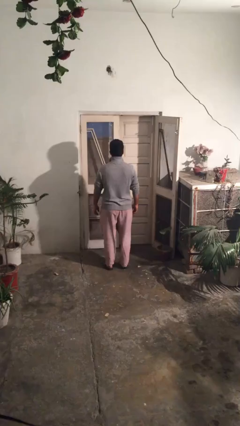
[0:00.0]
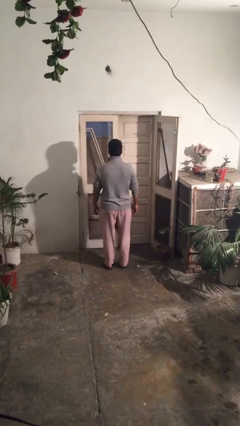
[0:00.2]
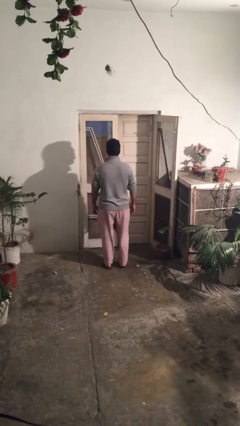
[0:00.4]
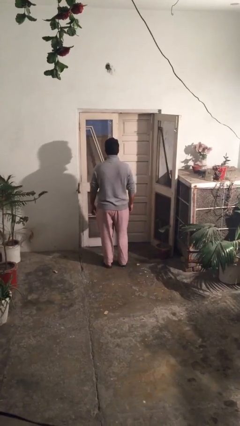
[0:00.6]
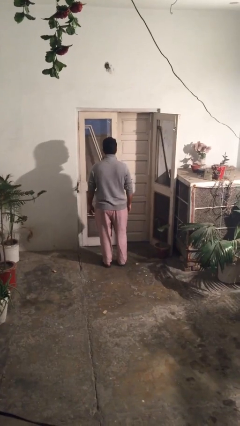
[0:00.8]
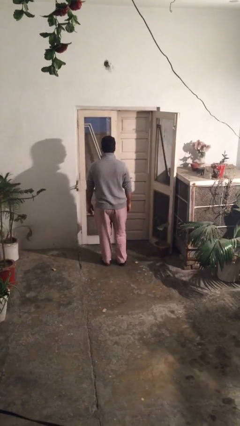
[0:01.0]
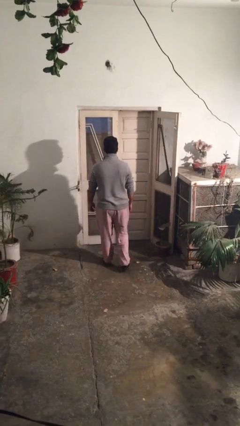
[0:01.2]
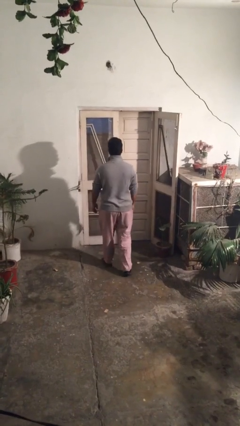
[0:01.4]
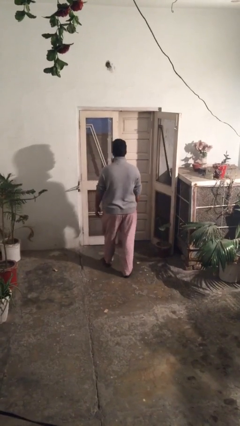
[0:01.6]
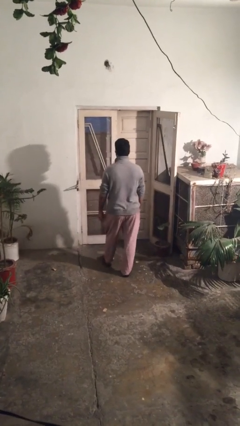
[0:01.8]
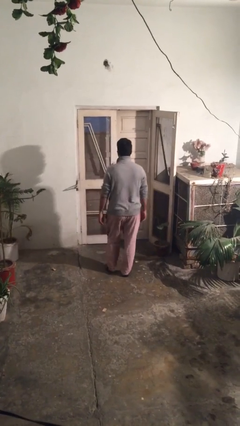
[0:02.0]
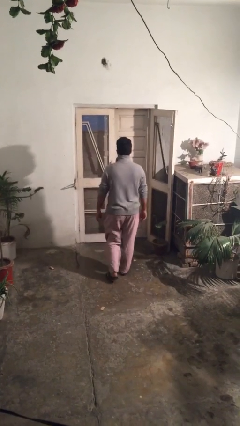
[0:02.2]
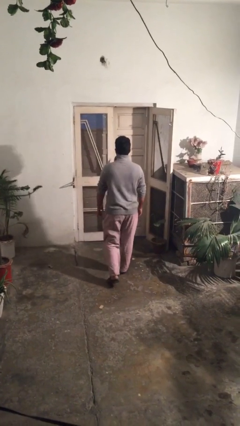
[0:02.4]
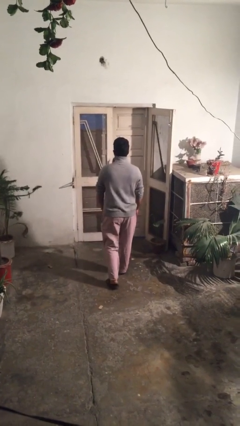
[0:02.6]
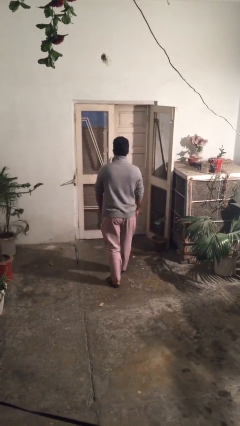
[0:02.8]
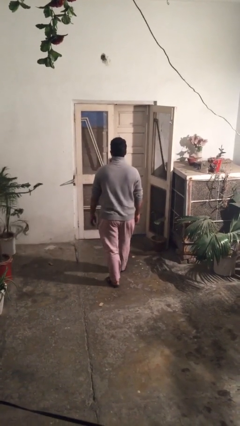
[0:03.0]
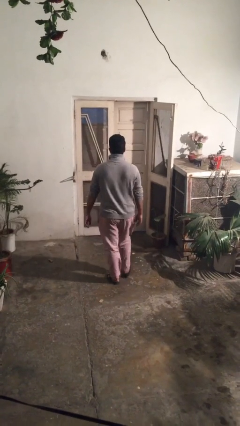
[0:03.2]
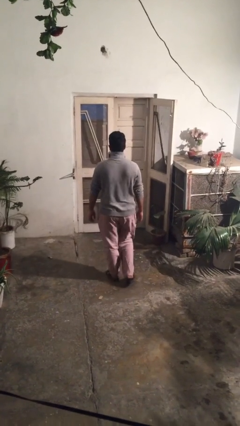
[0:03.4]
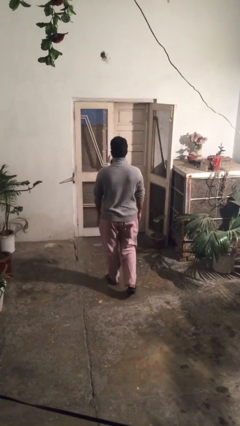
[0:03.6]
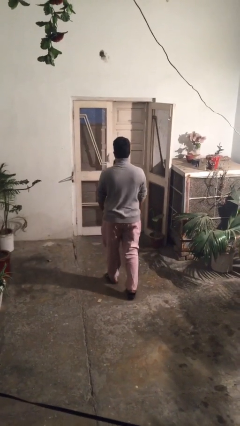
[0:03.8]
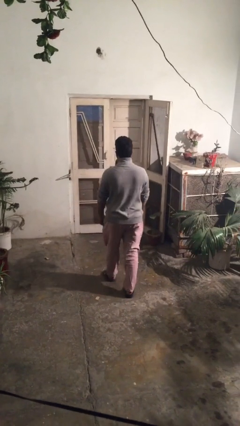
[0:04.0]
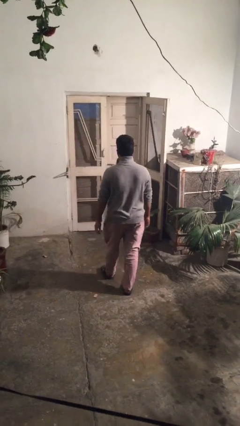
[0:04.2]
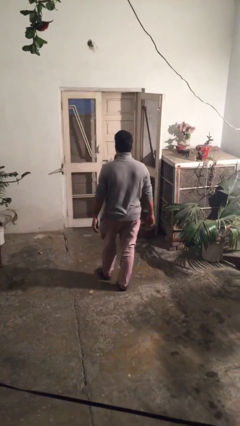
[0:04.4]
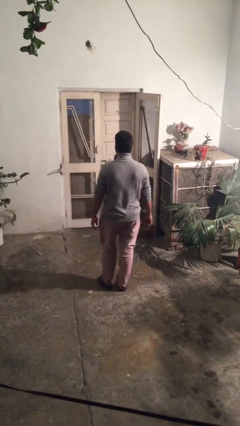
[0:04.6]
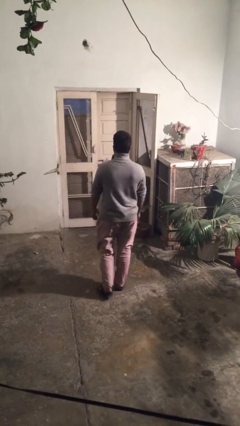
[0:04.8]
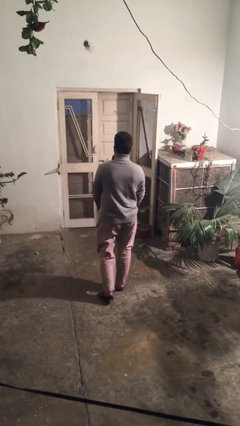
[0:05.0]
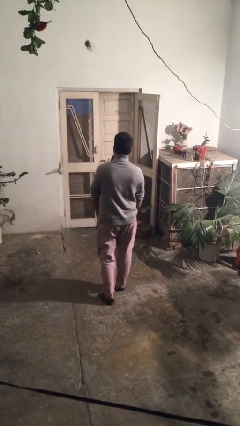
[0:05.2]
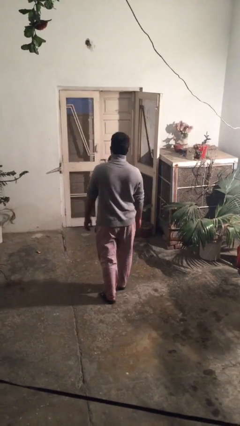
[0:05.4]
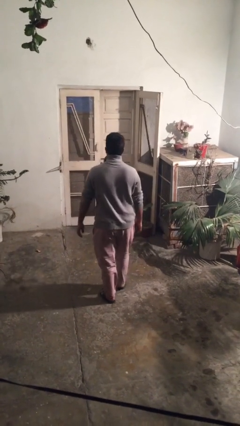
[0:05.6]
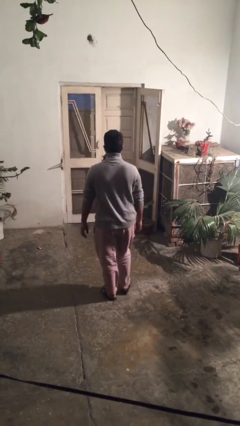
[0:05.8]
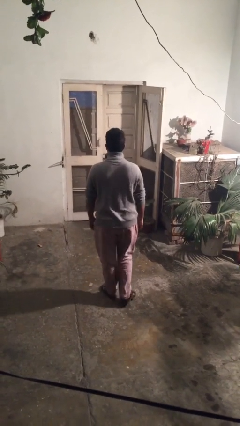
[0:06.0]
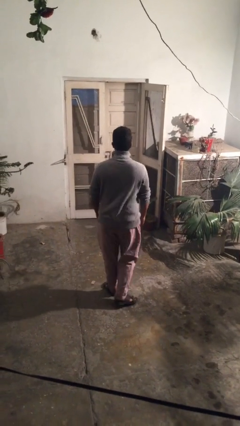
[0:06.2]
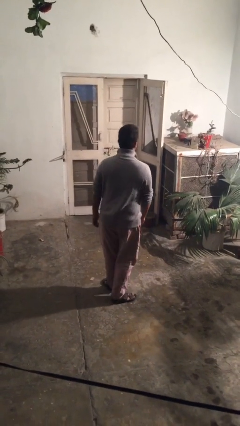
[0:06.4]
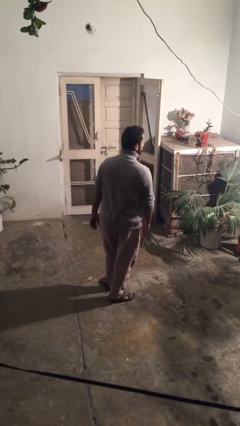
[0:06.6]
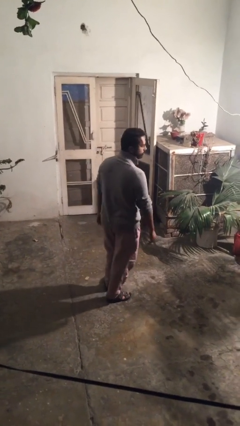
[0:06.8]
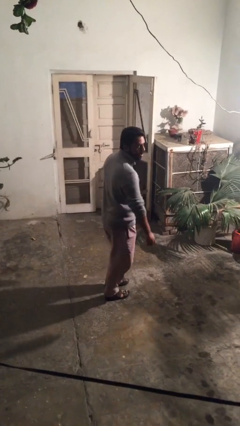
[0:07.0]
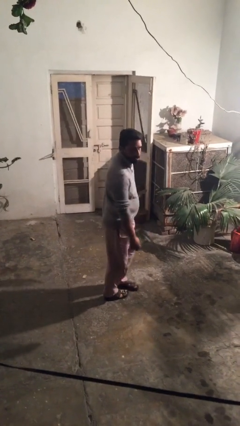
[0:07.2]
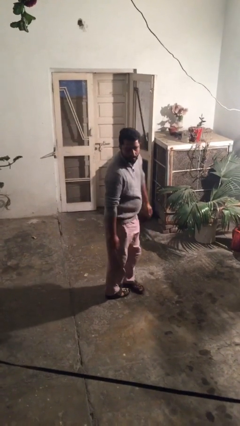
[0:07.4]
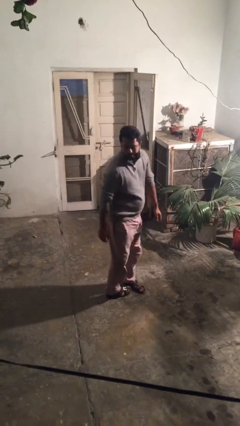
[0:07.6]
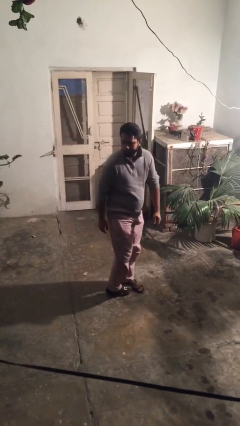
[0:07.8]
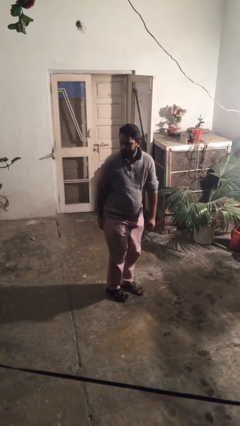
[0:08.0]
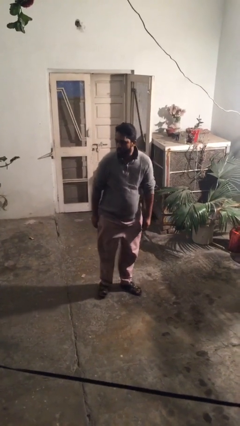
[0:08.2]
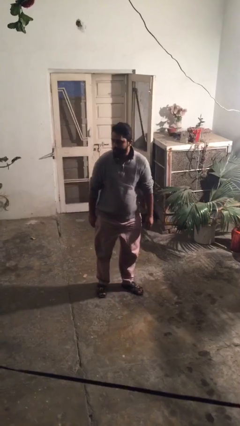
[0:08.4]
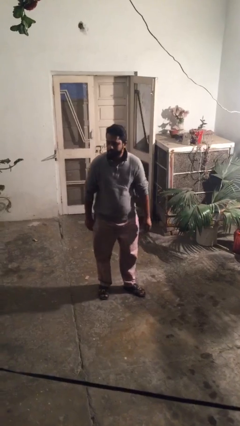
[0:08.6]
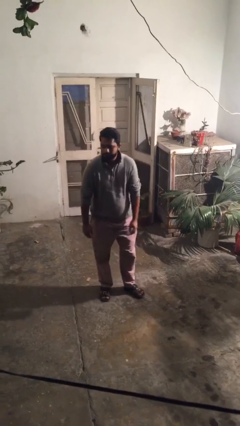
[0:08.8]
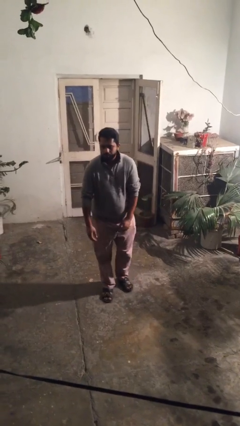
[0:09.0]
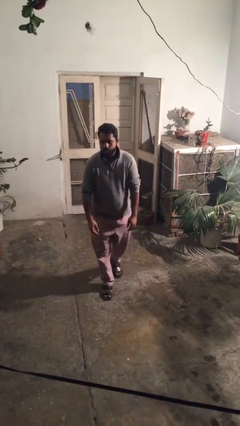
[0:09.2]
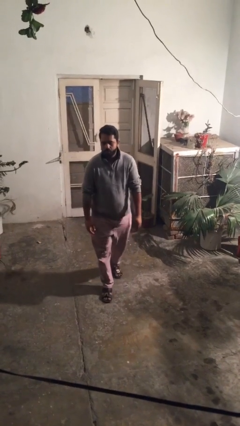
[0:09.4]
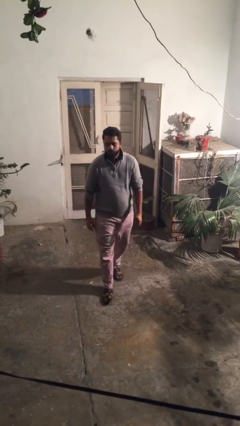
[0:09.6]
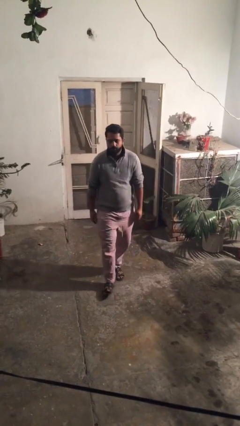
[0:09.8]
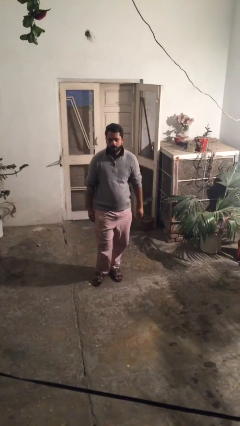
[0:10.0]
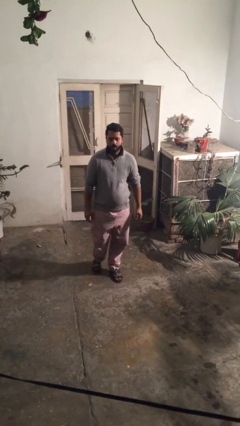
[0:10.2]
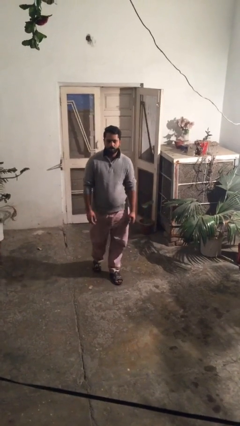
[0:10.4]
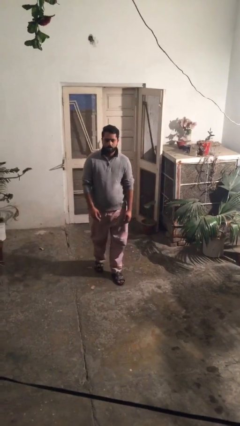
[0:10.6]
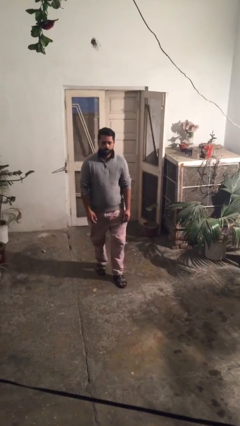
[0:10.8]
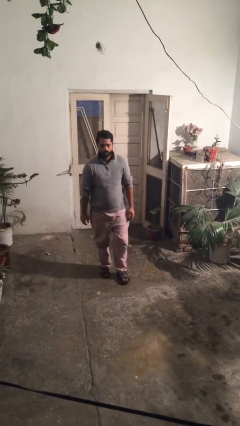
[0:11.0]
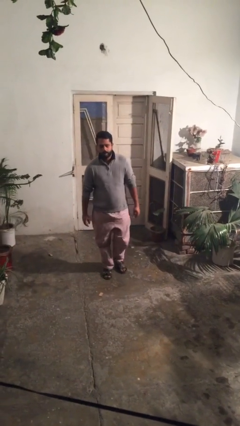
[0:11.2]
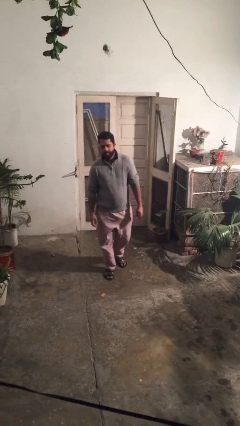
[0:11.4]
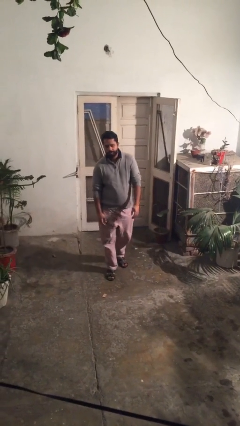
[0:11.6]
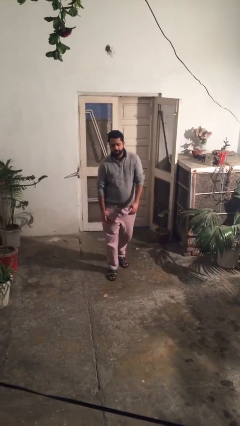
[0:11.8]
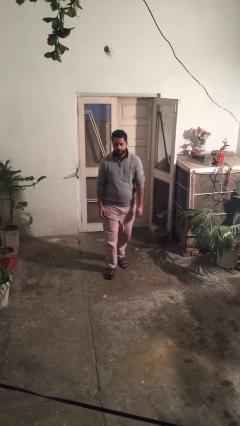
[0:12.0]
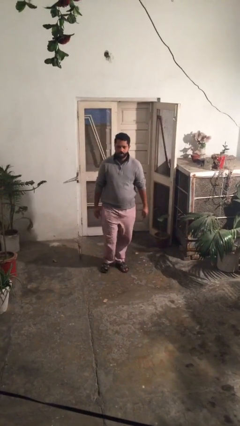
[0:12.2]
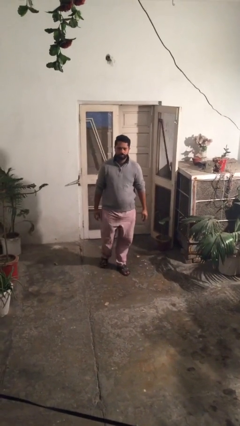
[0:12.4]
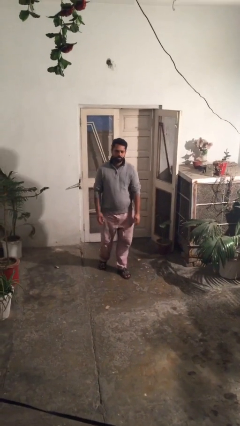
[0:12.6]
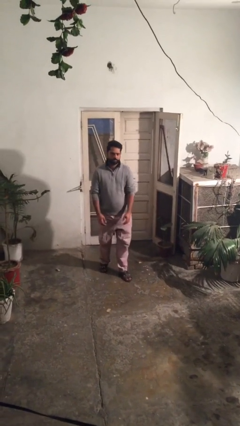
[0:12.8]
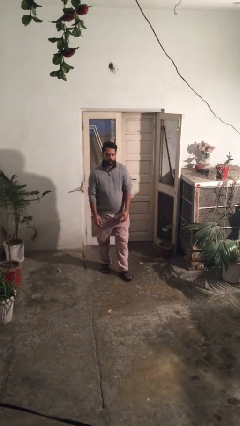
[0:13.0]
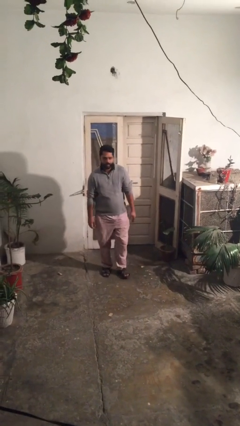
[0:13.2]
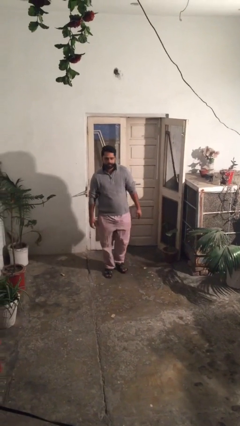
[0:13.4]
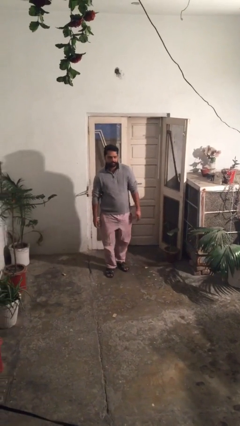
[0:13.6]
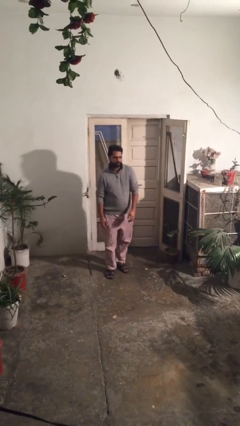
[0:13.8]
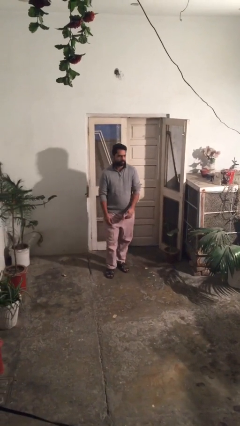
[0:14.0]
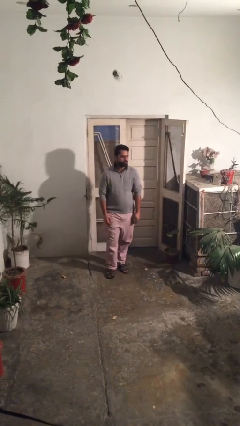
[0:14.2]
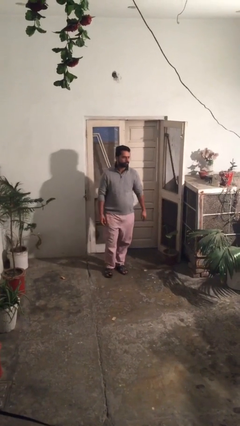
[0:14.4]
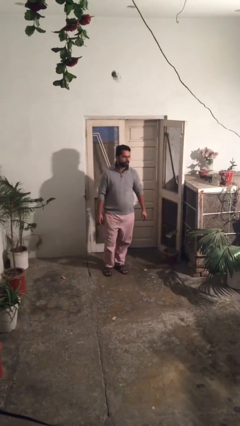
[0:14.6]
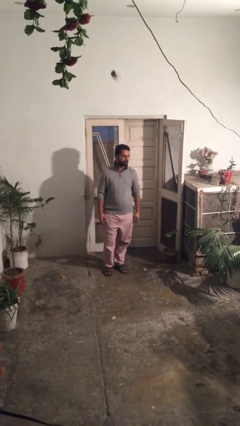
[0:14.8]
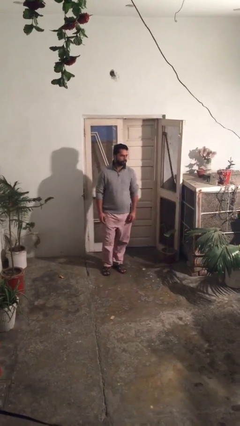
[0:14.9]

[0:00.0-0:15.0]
person walks

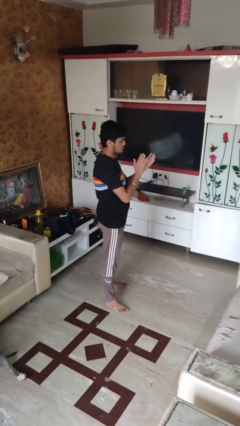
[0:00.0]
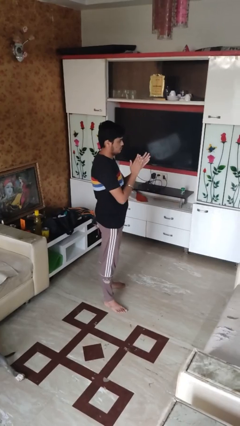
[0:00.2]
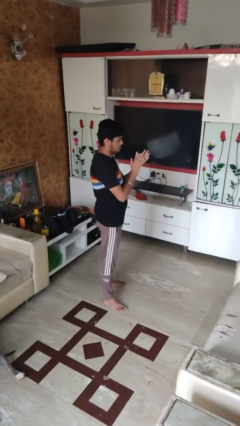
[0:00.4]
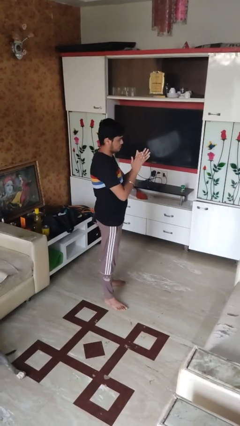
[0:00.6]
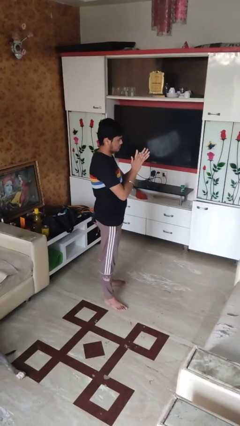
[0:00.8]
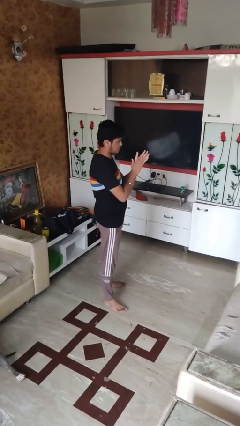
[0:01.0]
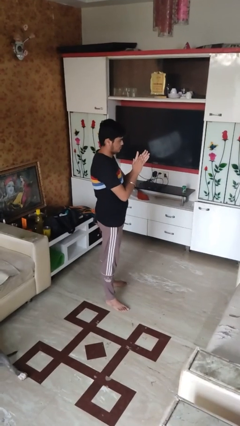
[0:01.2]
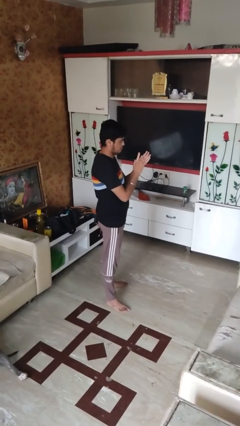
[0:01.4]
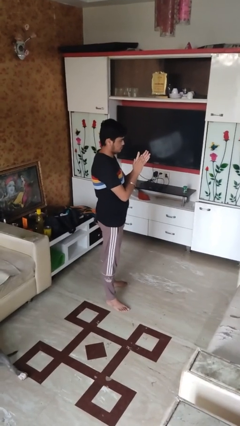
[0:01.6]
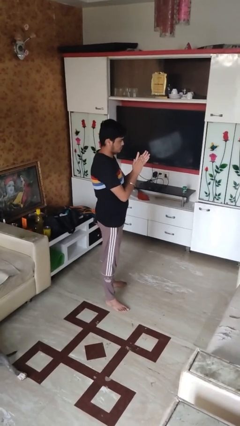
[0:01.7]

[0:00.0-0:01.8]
person claps hands

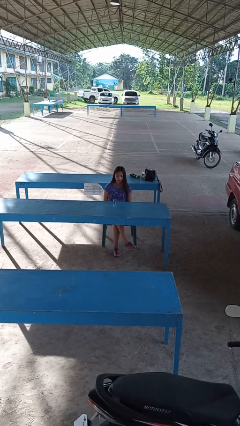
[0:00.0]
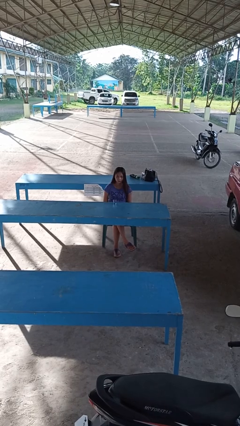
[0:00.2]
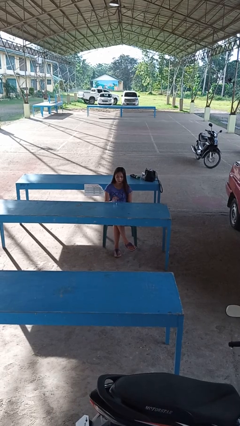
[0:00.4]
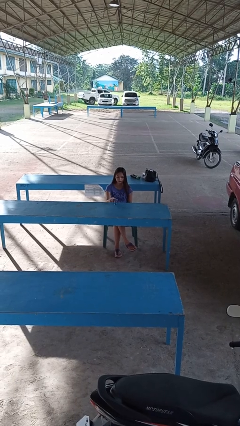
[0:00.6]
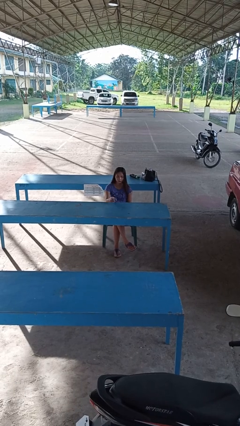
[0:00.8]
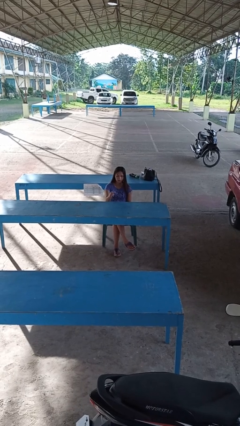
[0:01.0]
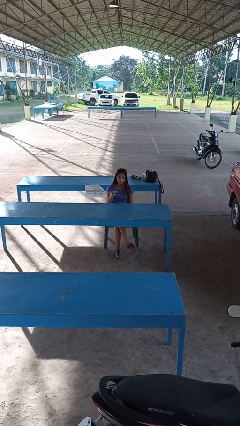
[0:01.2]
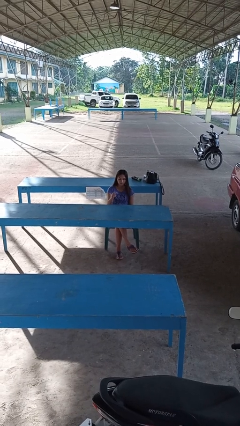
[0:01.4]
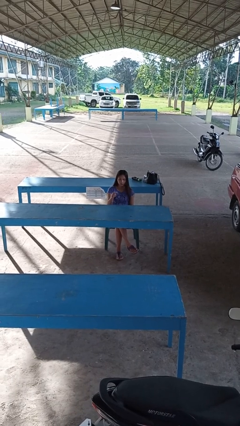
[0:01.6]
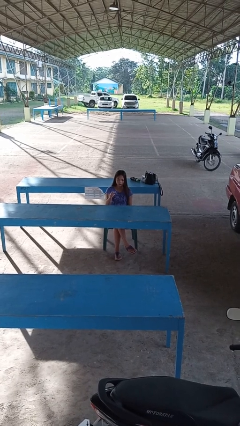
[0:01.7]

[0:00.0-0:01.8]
person picks up object from table
